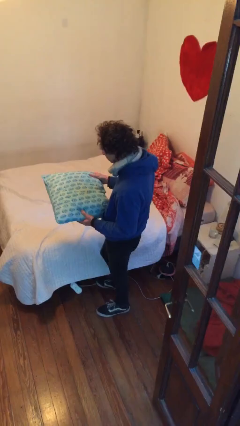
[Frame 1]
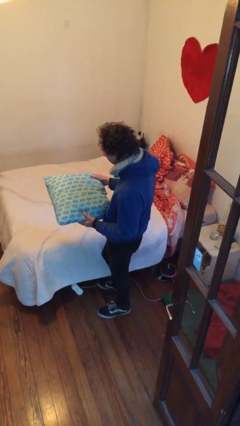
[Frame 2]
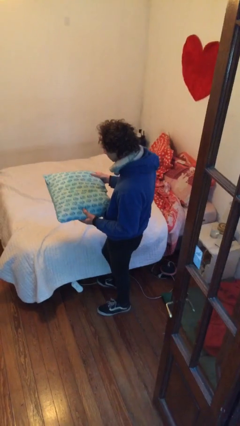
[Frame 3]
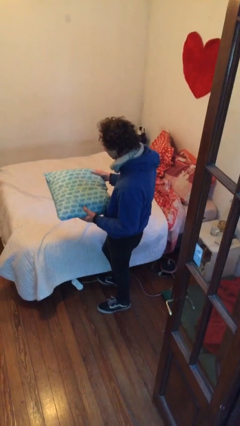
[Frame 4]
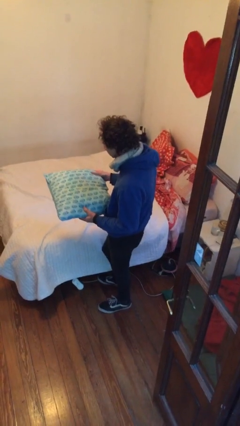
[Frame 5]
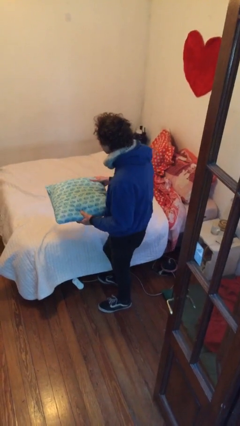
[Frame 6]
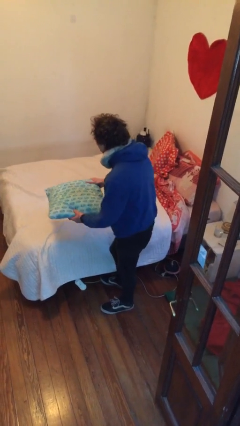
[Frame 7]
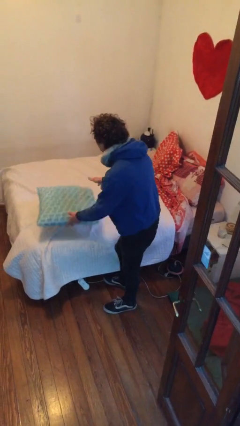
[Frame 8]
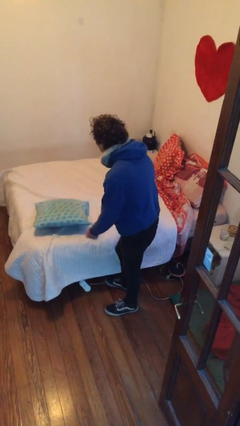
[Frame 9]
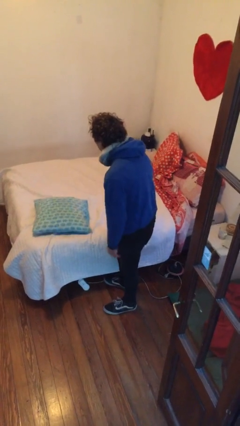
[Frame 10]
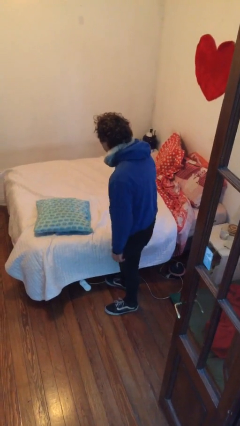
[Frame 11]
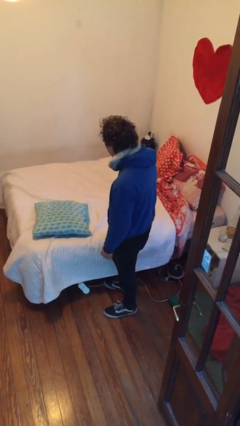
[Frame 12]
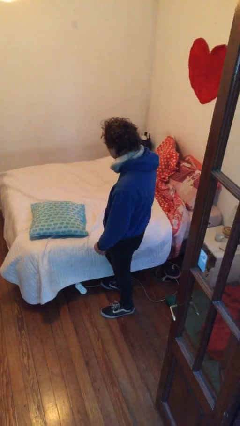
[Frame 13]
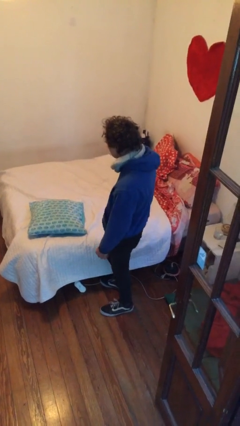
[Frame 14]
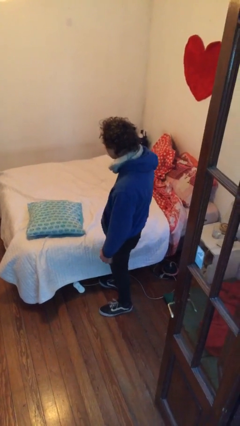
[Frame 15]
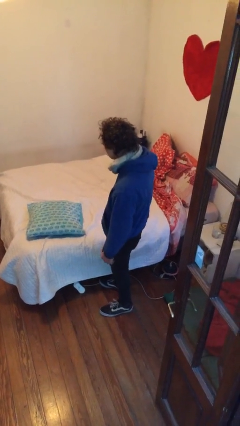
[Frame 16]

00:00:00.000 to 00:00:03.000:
person puts down object on bed

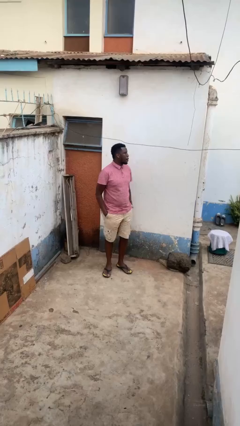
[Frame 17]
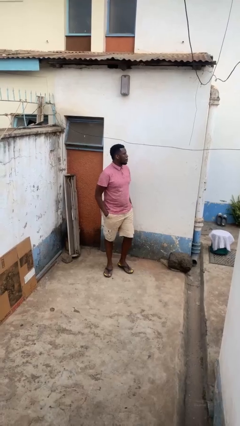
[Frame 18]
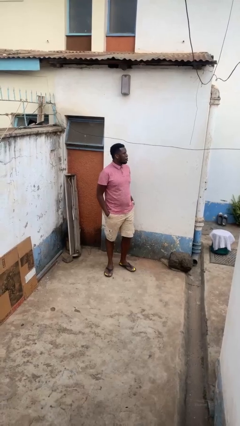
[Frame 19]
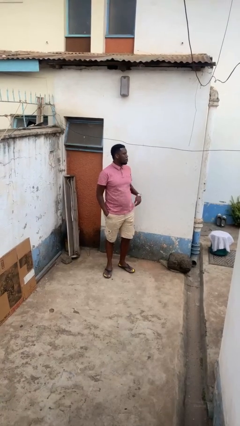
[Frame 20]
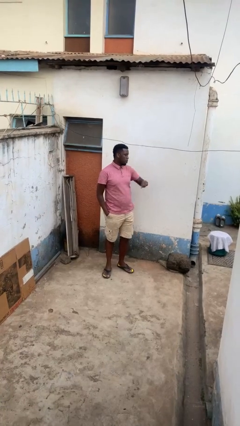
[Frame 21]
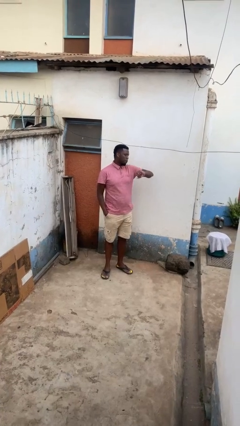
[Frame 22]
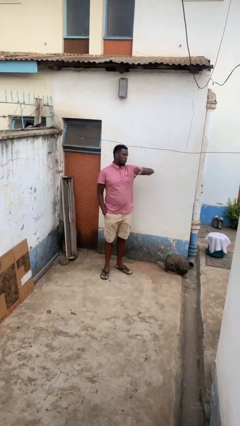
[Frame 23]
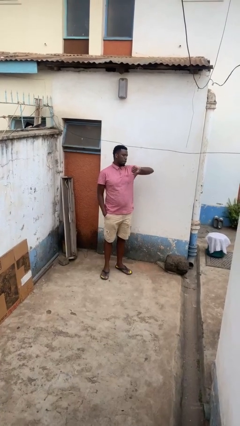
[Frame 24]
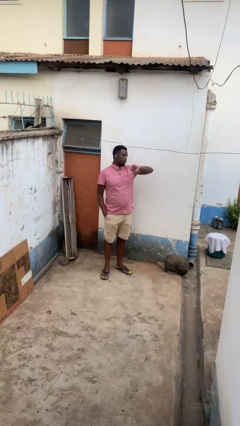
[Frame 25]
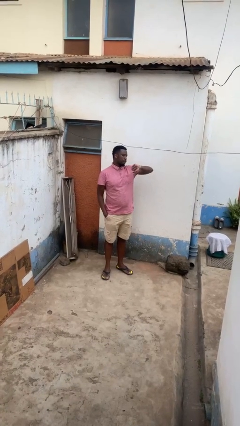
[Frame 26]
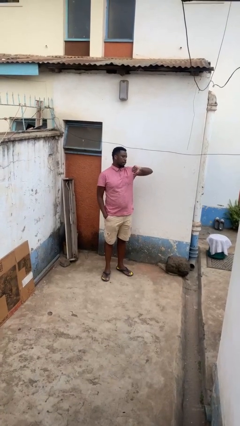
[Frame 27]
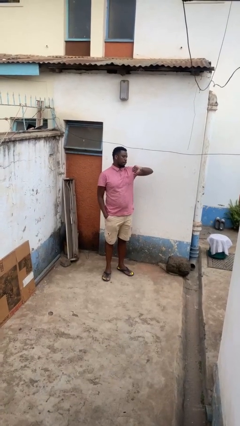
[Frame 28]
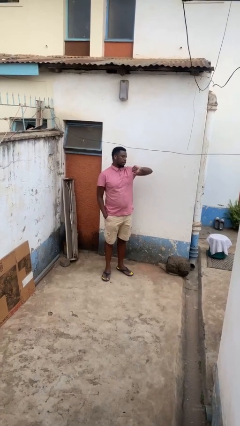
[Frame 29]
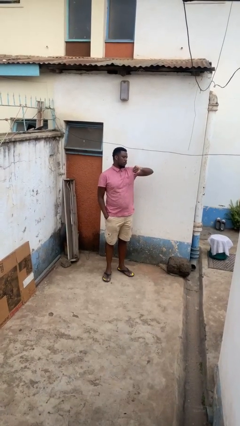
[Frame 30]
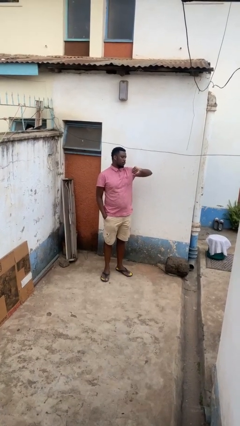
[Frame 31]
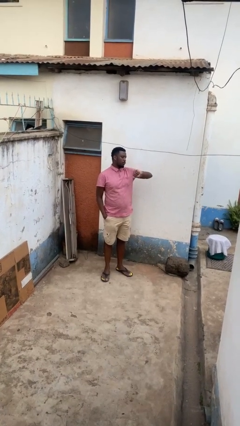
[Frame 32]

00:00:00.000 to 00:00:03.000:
person looks at wristwatch

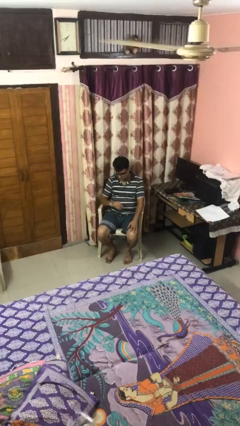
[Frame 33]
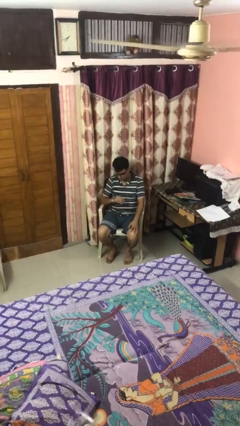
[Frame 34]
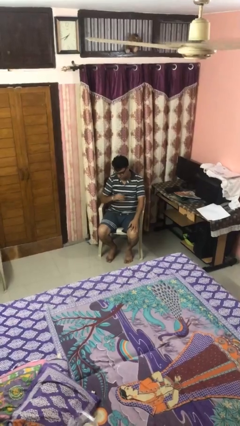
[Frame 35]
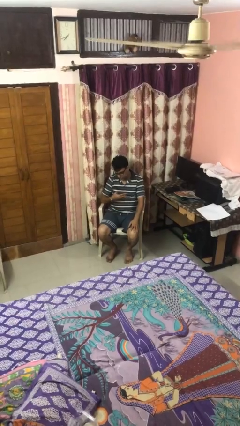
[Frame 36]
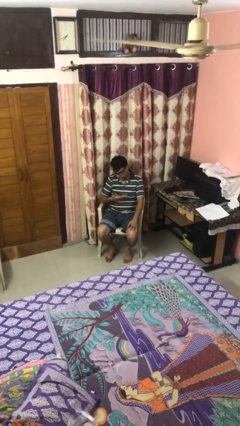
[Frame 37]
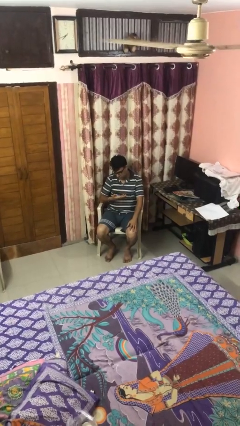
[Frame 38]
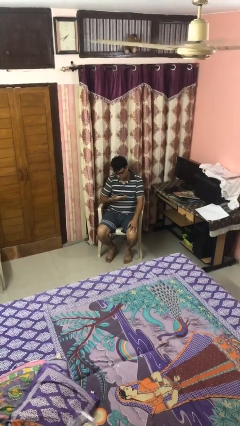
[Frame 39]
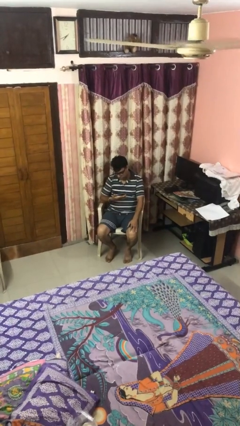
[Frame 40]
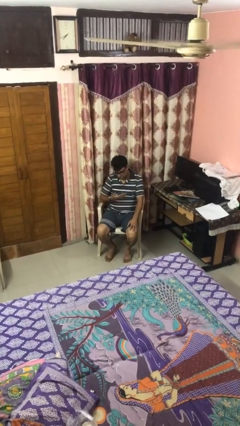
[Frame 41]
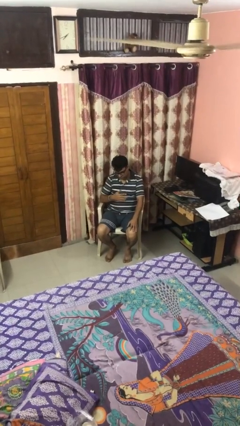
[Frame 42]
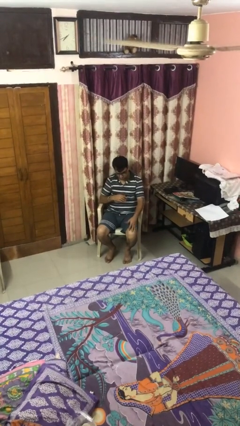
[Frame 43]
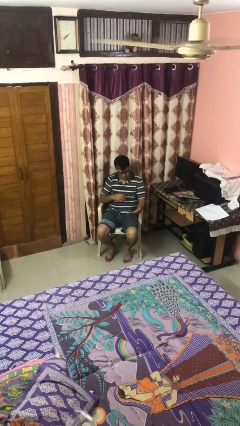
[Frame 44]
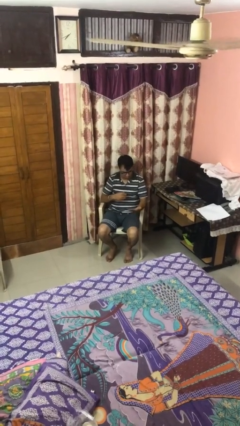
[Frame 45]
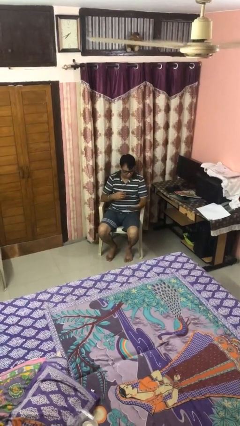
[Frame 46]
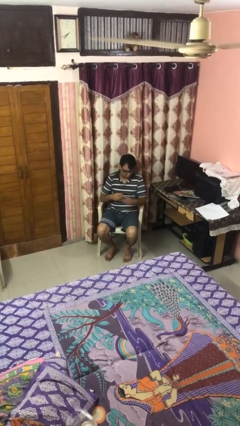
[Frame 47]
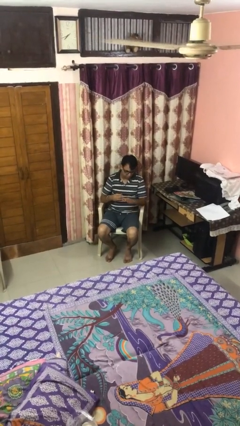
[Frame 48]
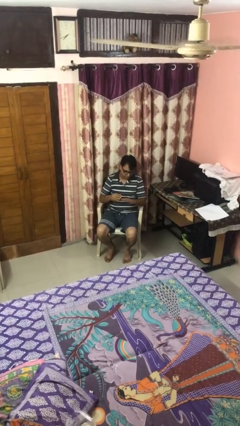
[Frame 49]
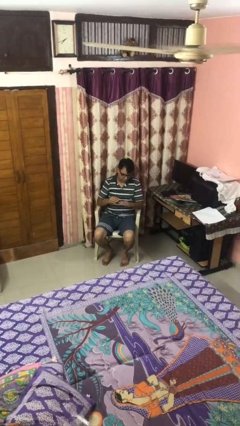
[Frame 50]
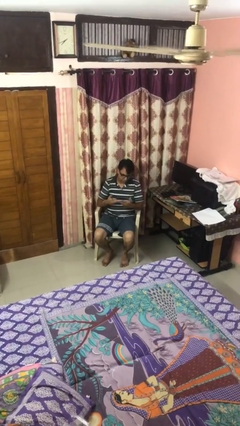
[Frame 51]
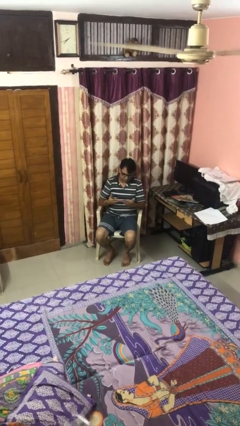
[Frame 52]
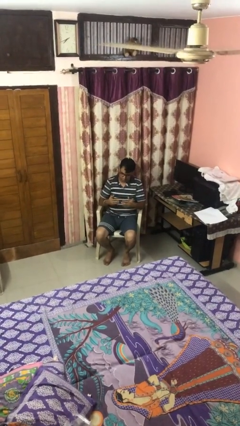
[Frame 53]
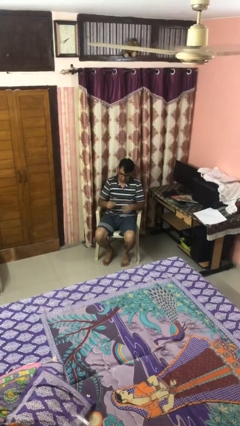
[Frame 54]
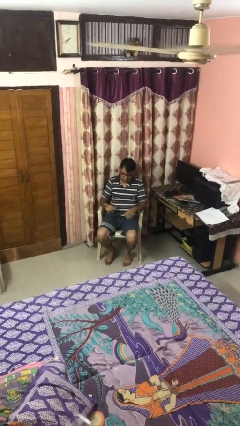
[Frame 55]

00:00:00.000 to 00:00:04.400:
person looks at hands in lap

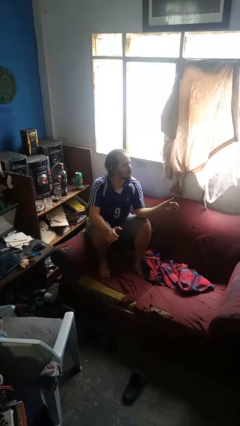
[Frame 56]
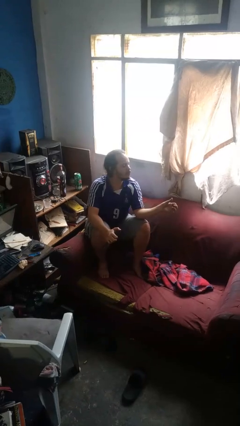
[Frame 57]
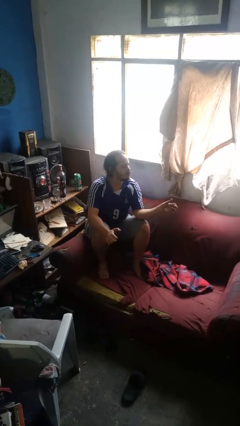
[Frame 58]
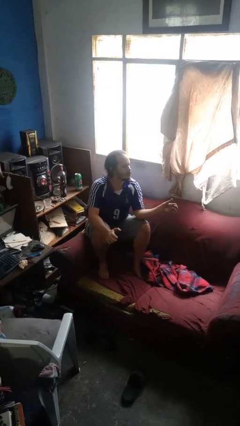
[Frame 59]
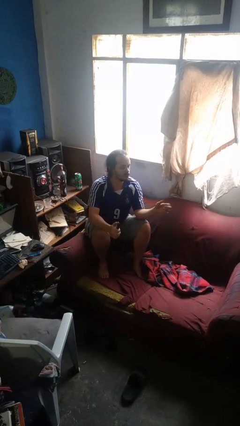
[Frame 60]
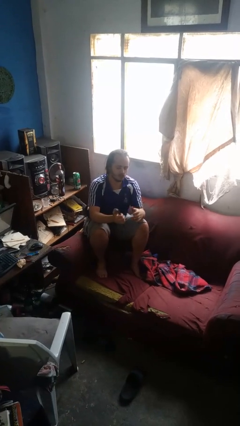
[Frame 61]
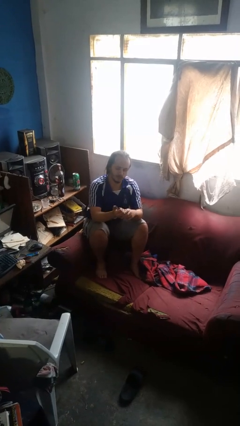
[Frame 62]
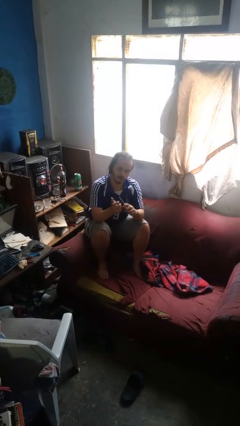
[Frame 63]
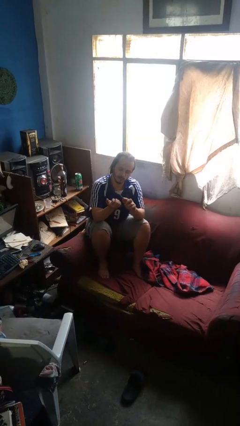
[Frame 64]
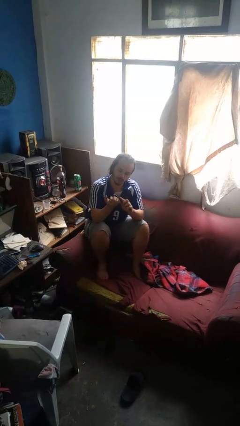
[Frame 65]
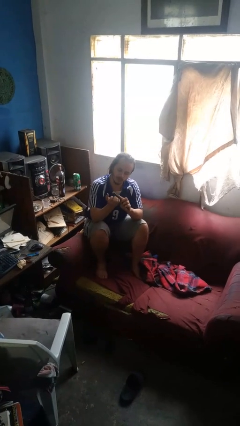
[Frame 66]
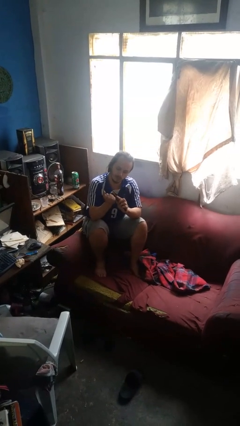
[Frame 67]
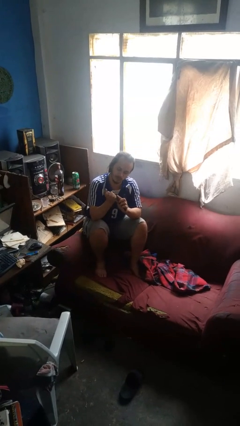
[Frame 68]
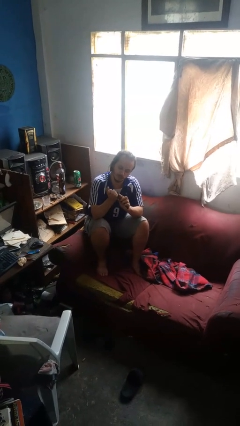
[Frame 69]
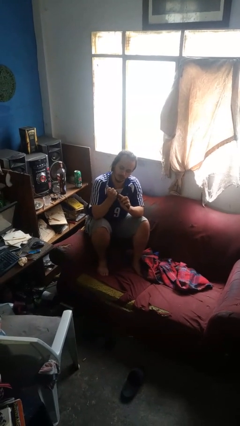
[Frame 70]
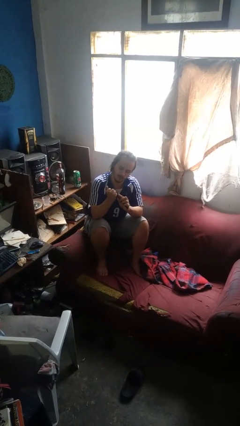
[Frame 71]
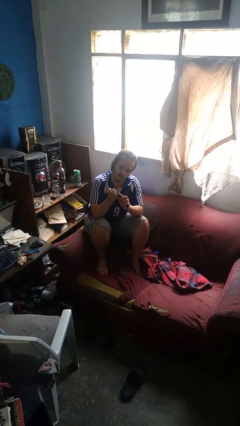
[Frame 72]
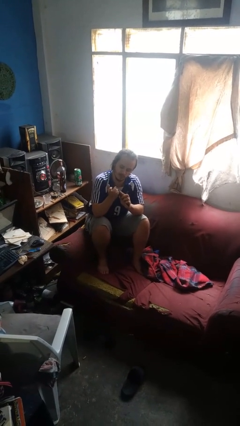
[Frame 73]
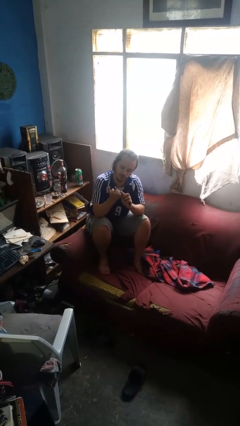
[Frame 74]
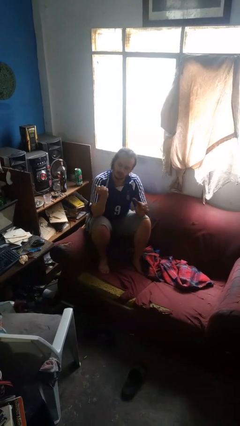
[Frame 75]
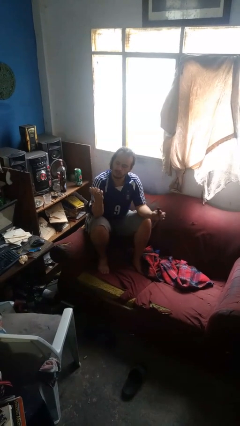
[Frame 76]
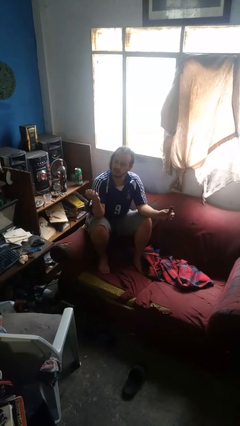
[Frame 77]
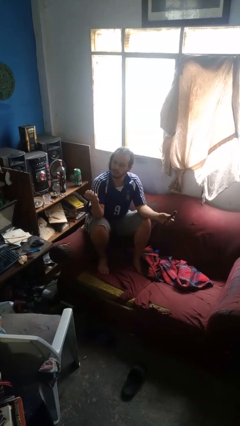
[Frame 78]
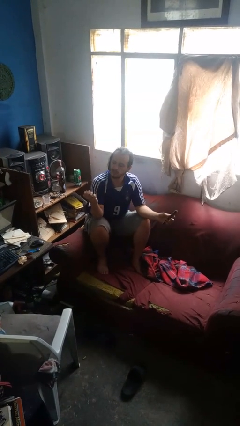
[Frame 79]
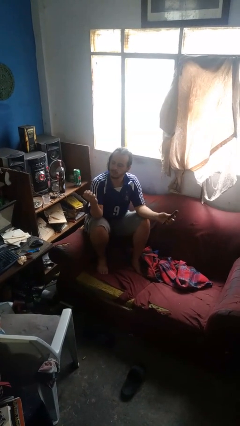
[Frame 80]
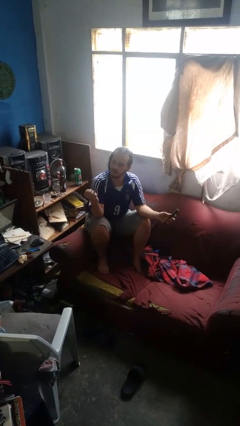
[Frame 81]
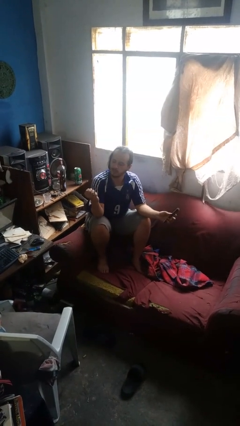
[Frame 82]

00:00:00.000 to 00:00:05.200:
person files fingernails

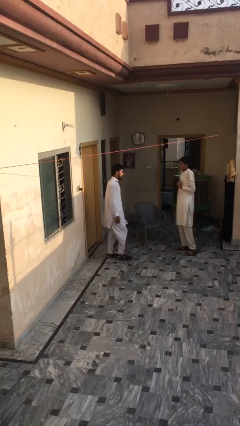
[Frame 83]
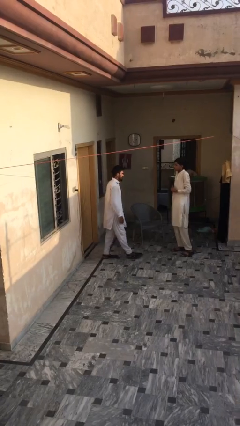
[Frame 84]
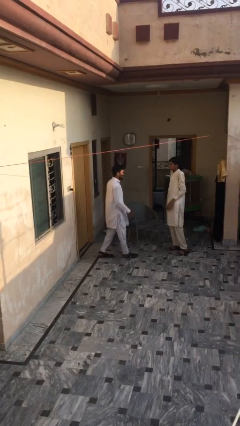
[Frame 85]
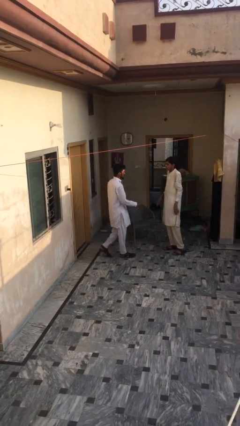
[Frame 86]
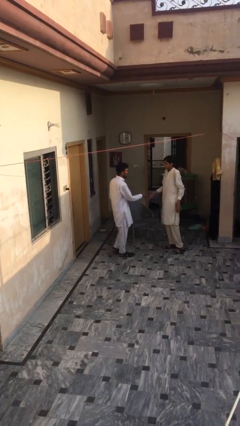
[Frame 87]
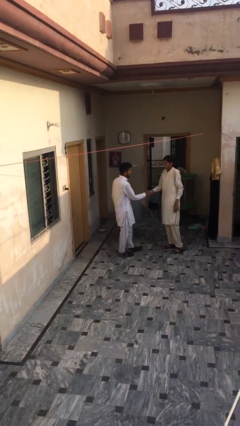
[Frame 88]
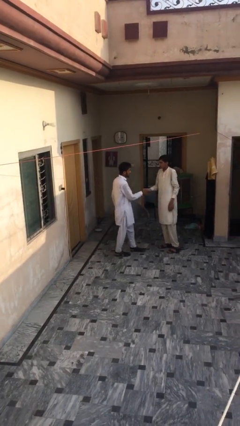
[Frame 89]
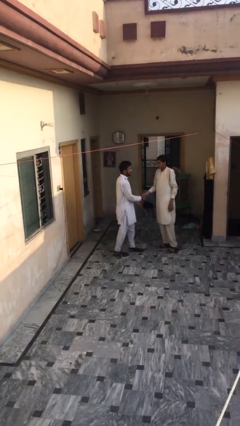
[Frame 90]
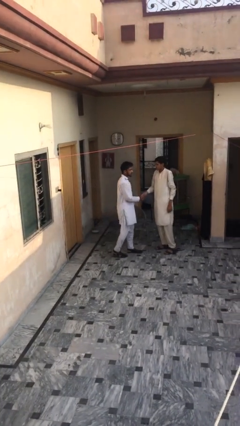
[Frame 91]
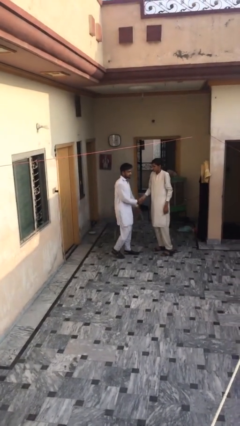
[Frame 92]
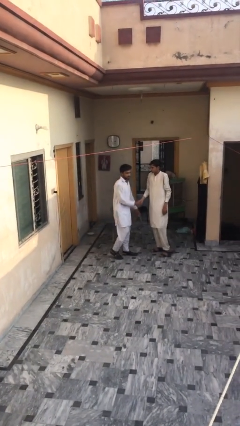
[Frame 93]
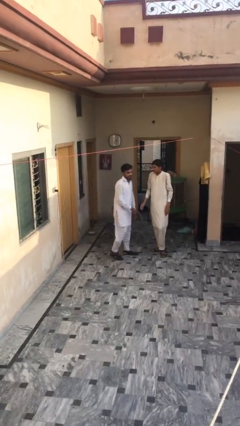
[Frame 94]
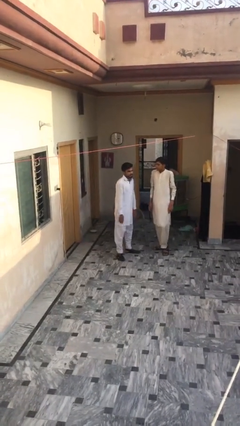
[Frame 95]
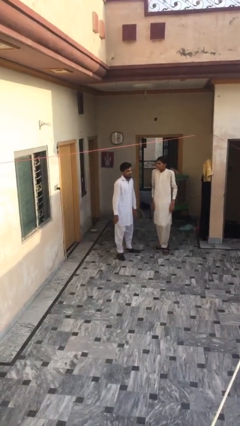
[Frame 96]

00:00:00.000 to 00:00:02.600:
person shakes hand
